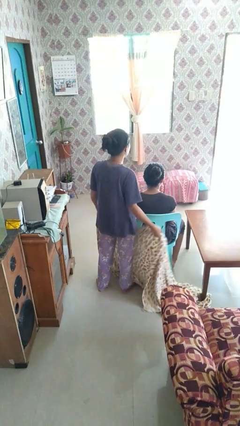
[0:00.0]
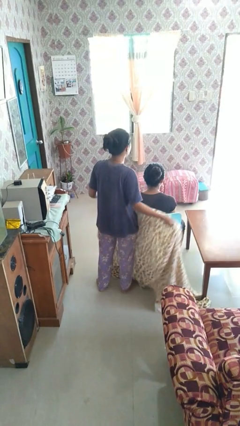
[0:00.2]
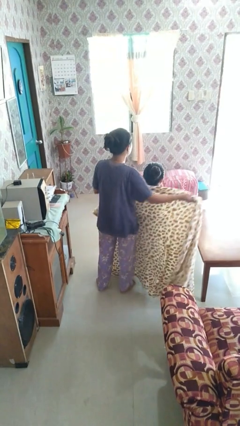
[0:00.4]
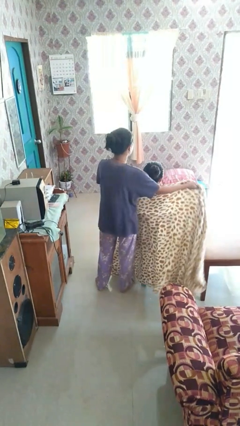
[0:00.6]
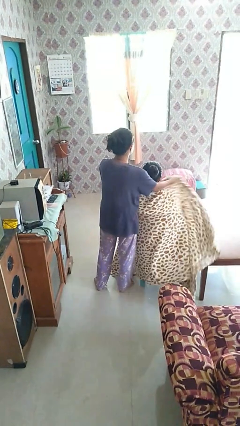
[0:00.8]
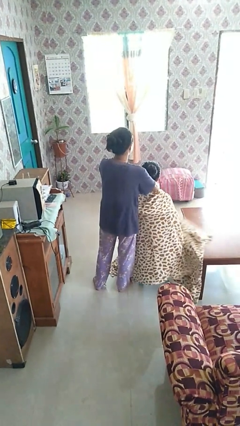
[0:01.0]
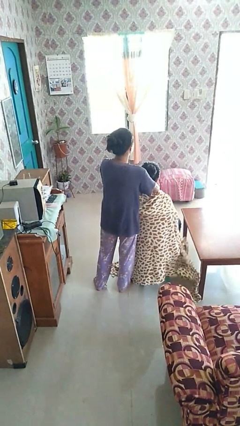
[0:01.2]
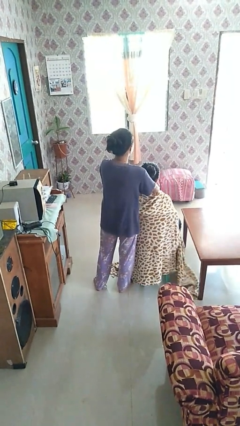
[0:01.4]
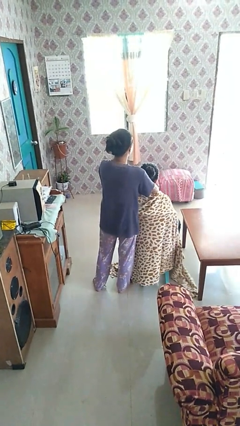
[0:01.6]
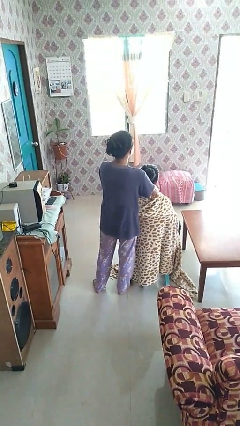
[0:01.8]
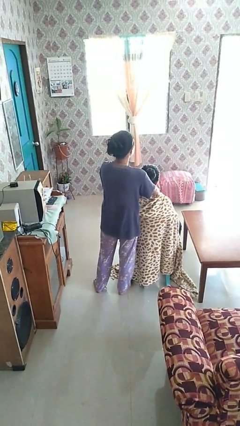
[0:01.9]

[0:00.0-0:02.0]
person covers friend with blanket

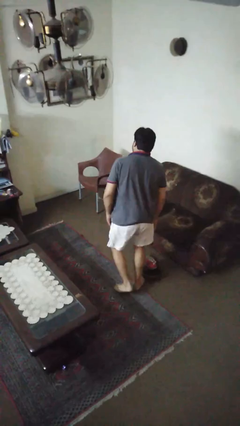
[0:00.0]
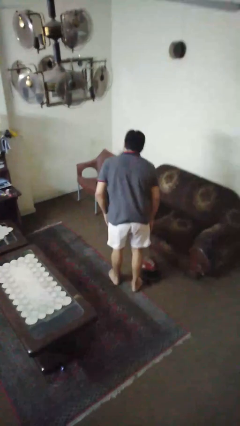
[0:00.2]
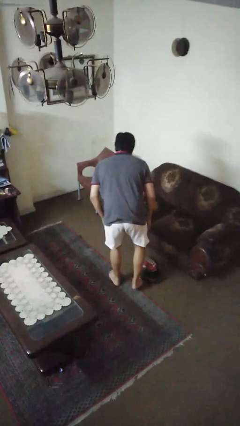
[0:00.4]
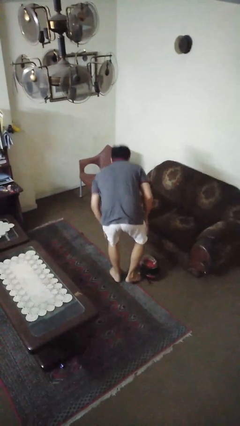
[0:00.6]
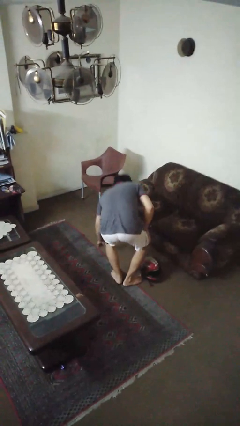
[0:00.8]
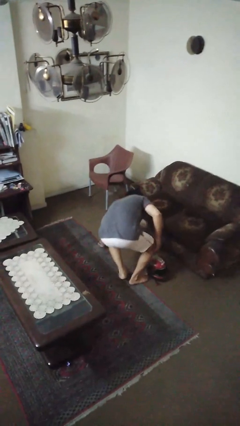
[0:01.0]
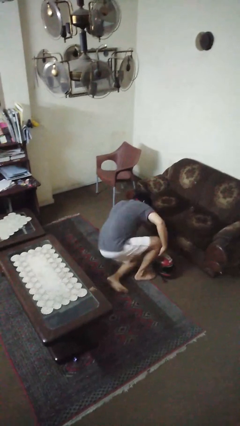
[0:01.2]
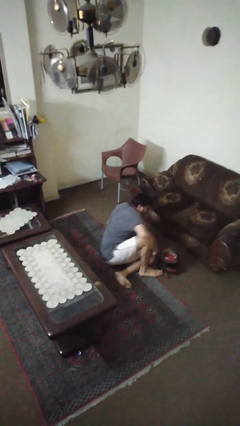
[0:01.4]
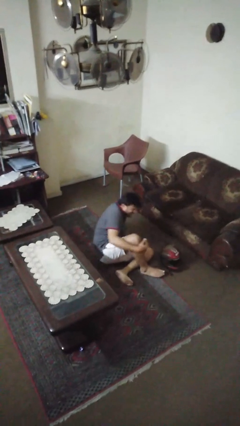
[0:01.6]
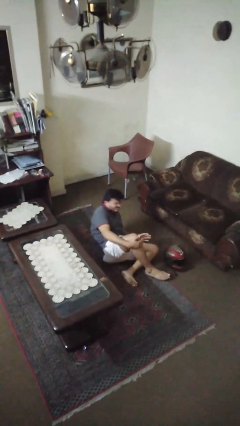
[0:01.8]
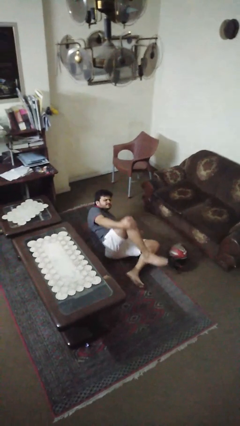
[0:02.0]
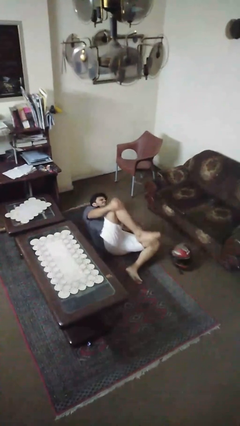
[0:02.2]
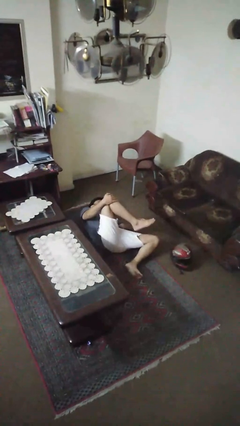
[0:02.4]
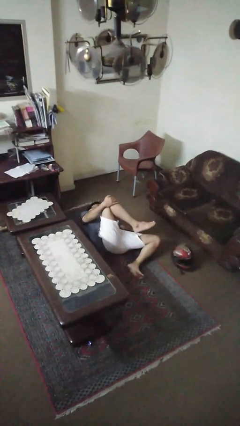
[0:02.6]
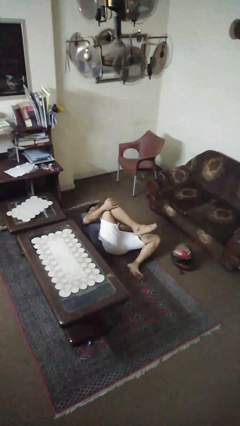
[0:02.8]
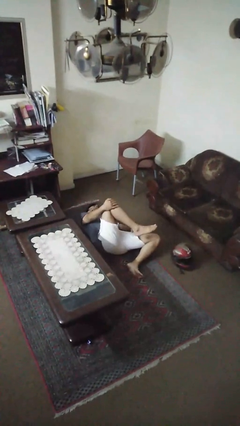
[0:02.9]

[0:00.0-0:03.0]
person lies down on floor

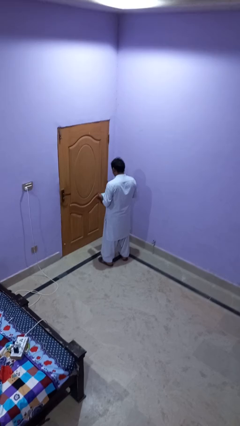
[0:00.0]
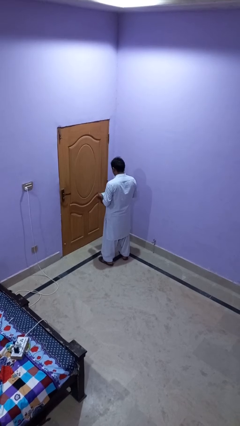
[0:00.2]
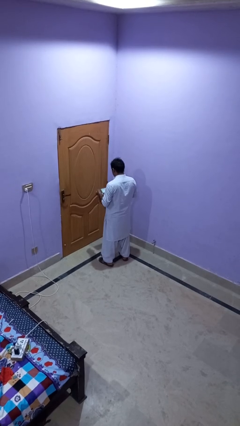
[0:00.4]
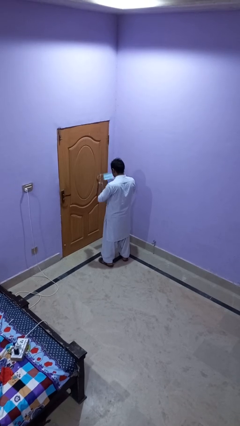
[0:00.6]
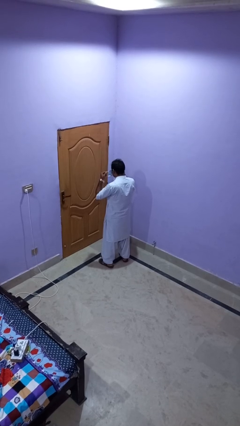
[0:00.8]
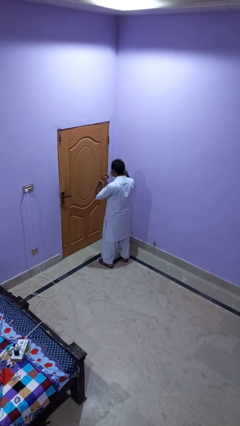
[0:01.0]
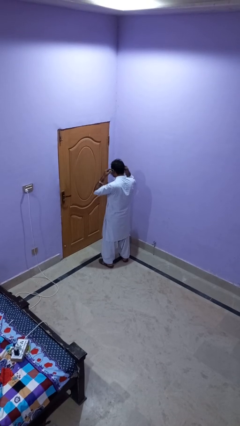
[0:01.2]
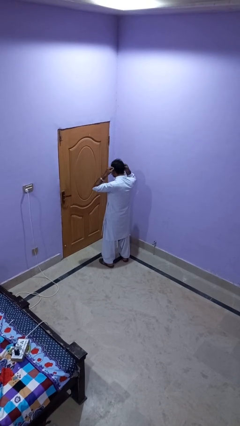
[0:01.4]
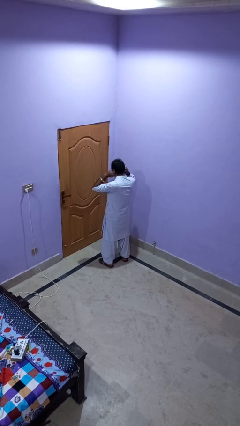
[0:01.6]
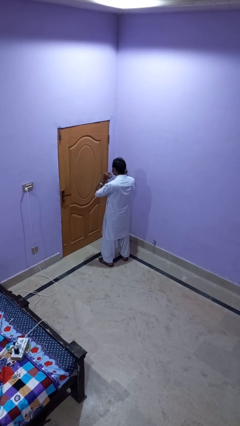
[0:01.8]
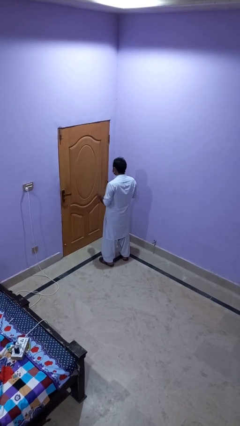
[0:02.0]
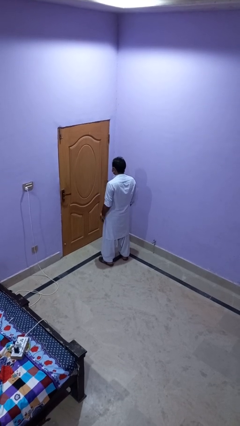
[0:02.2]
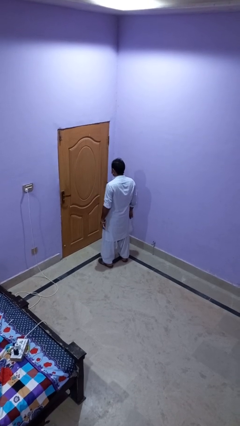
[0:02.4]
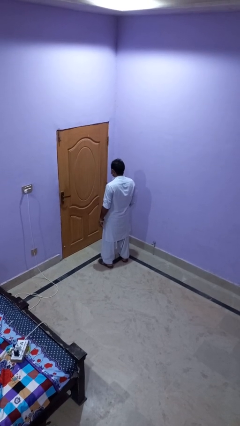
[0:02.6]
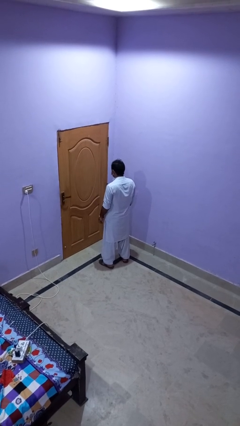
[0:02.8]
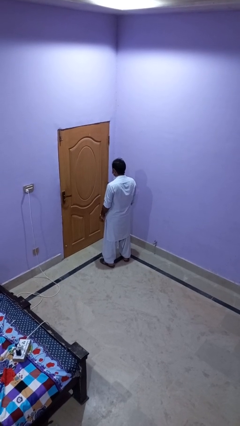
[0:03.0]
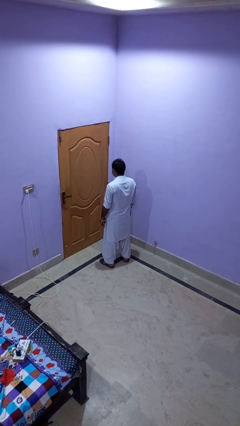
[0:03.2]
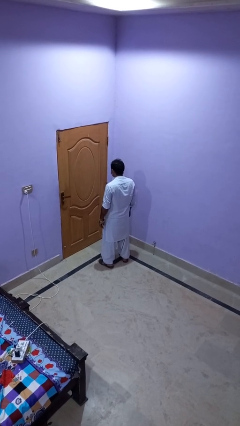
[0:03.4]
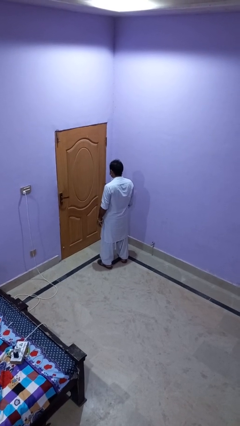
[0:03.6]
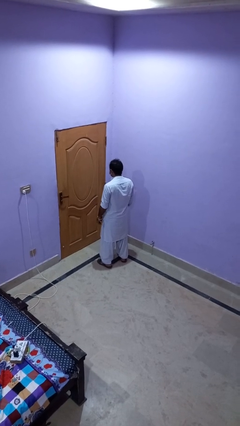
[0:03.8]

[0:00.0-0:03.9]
person puts on facemask

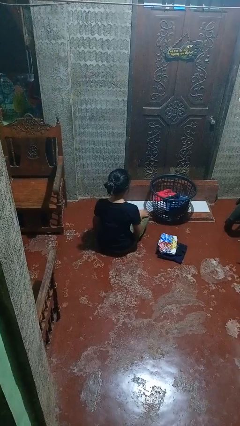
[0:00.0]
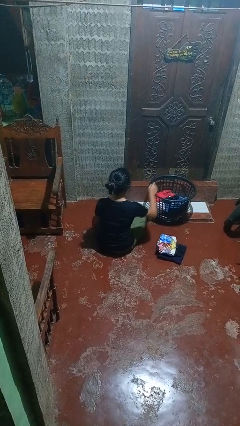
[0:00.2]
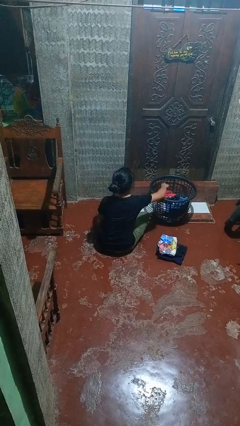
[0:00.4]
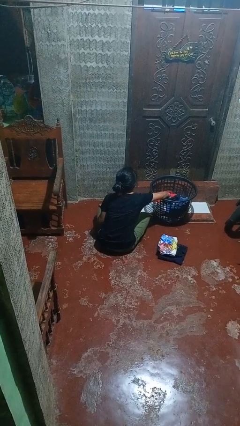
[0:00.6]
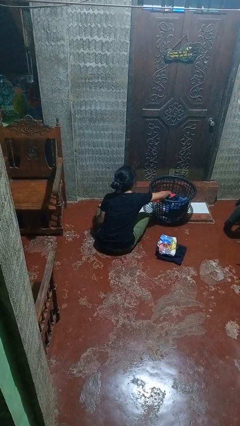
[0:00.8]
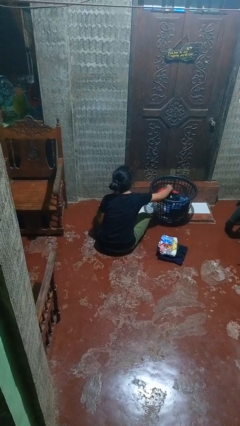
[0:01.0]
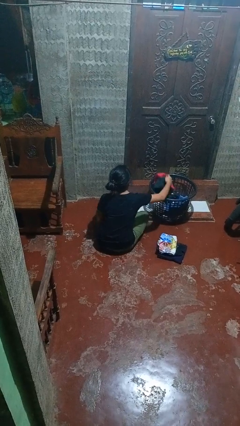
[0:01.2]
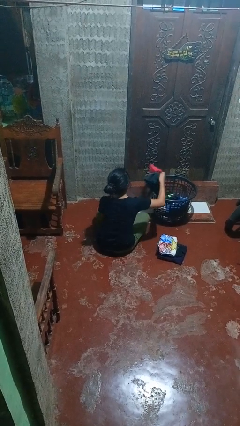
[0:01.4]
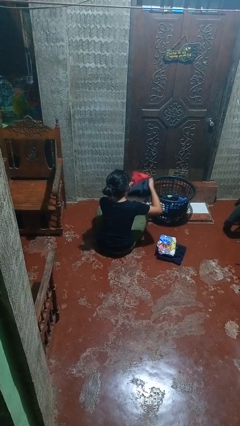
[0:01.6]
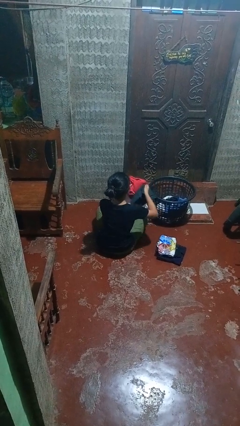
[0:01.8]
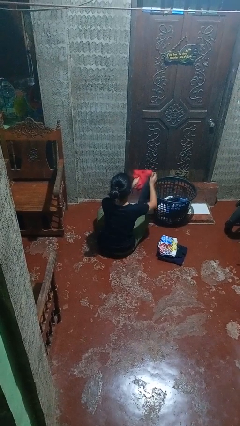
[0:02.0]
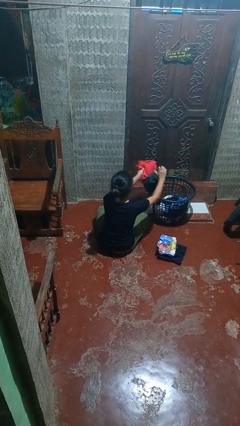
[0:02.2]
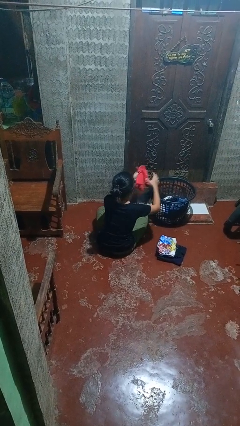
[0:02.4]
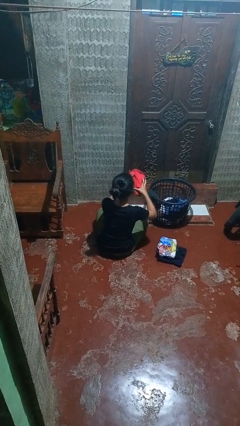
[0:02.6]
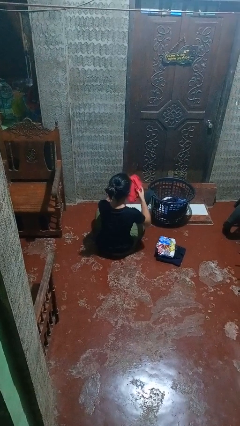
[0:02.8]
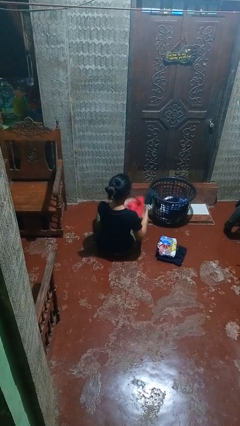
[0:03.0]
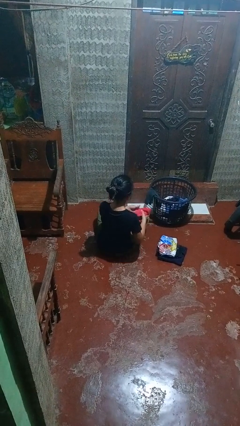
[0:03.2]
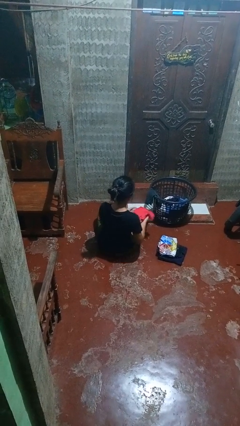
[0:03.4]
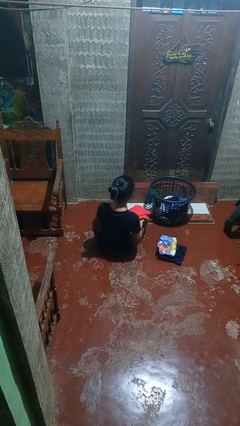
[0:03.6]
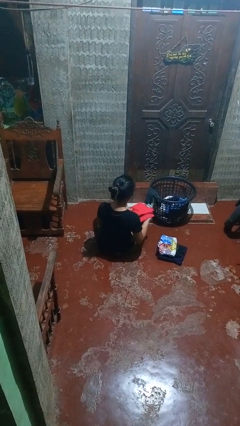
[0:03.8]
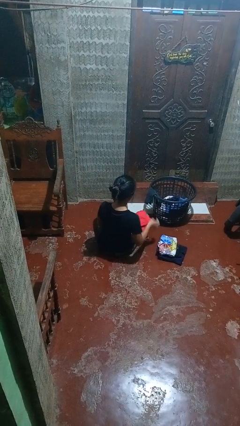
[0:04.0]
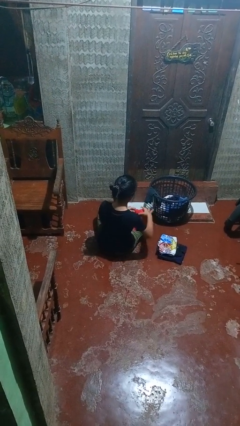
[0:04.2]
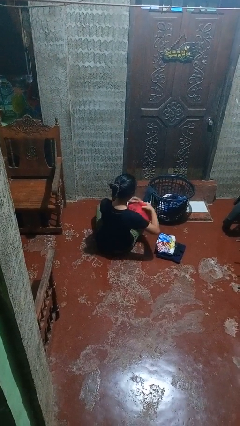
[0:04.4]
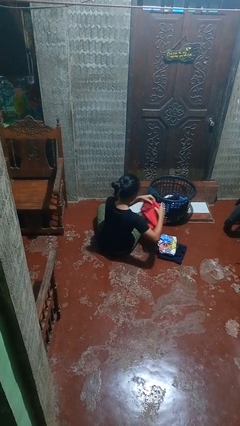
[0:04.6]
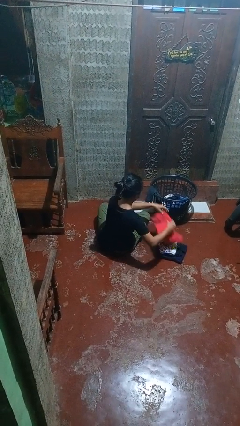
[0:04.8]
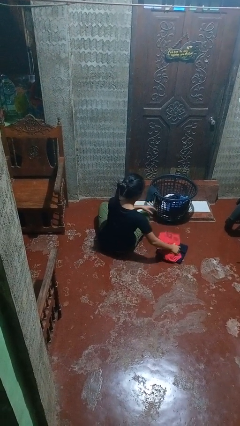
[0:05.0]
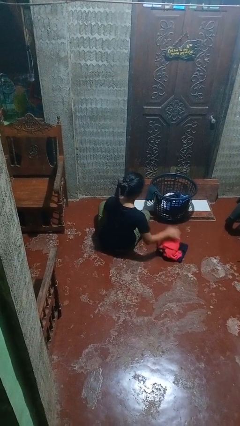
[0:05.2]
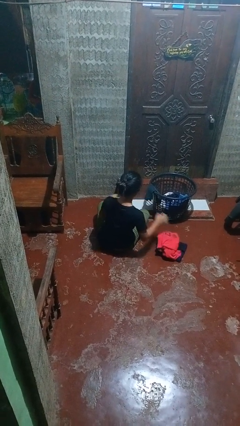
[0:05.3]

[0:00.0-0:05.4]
person folds shirt

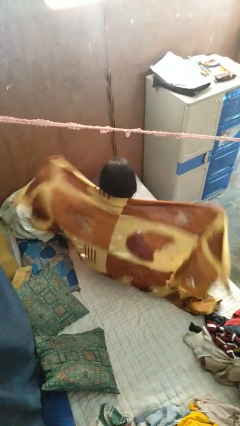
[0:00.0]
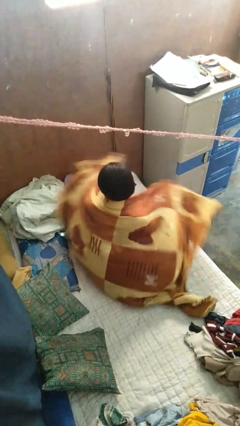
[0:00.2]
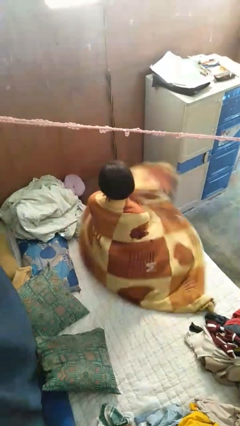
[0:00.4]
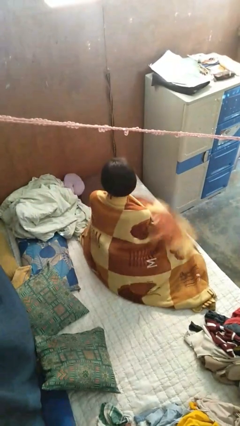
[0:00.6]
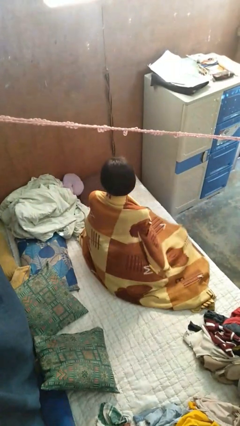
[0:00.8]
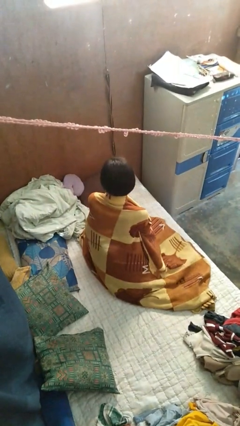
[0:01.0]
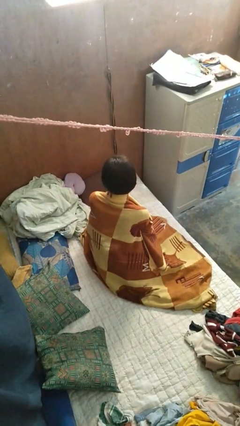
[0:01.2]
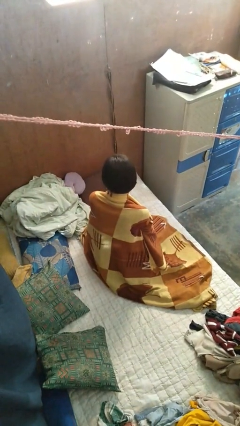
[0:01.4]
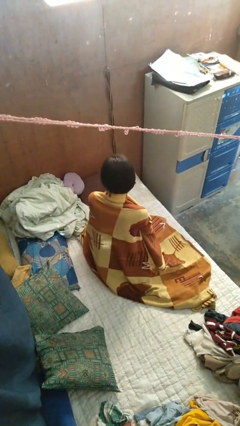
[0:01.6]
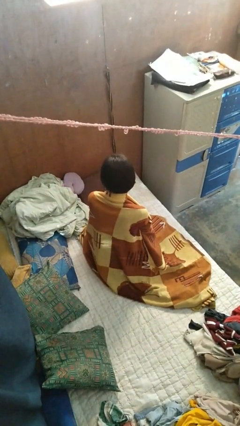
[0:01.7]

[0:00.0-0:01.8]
person covers with blanket

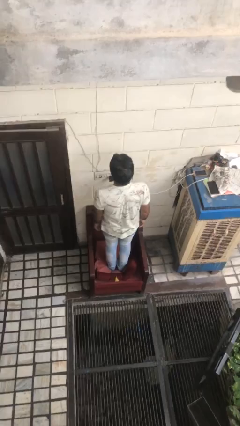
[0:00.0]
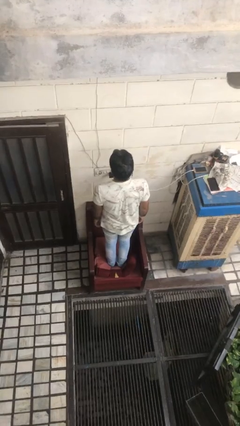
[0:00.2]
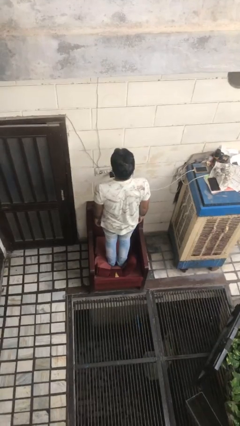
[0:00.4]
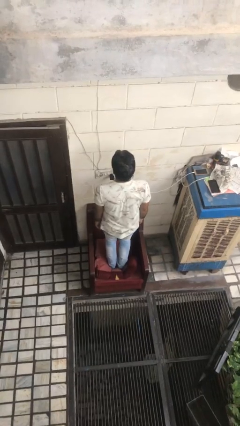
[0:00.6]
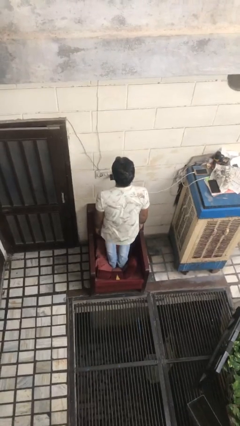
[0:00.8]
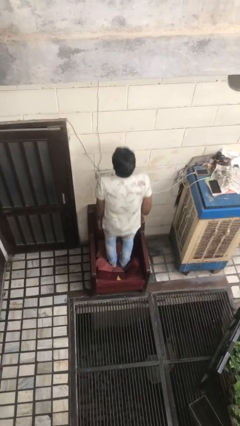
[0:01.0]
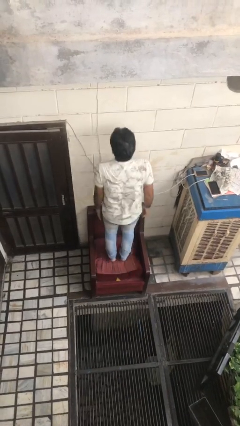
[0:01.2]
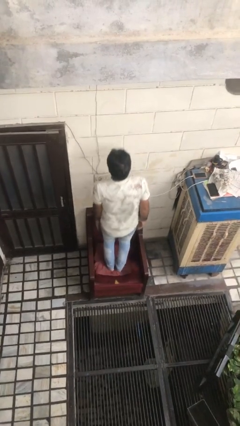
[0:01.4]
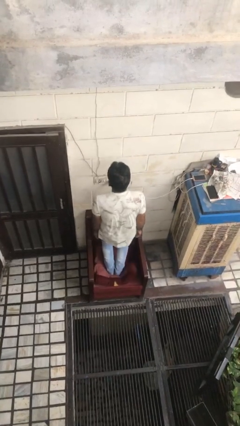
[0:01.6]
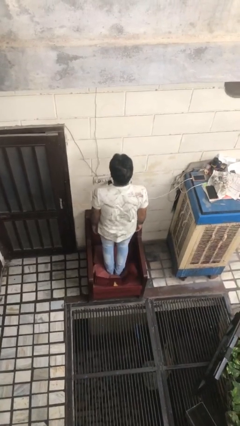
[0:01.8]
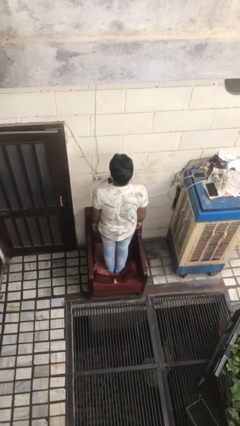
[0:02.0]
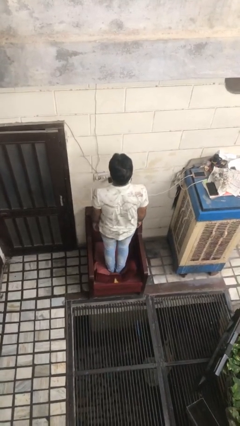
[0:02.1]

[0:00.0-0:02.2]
person jumps on couch
